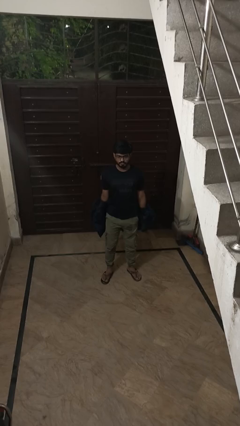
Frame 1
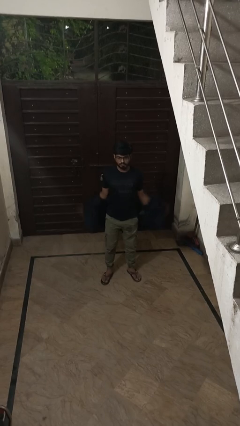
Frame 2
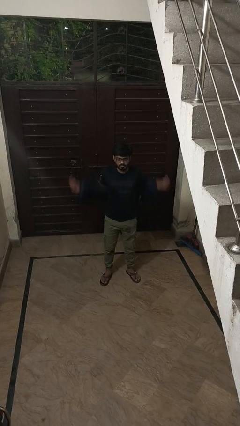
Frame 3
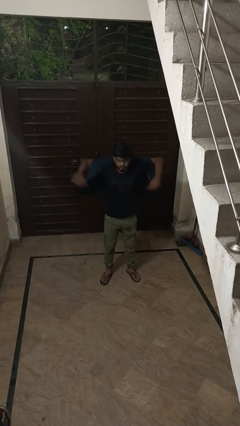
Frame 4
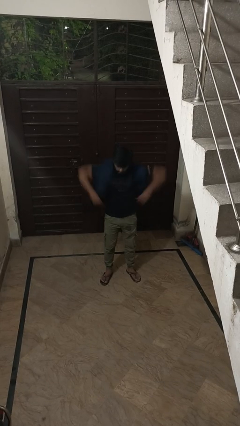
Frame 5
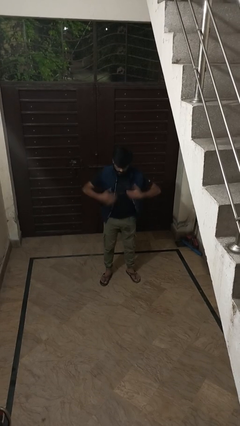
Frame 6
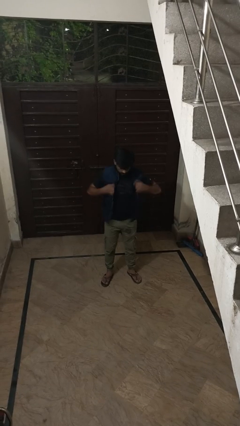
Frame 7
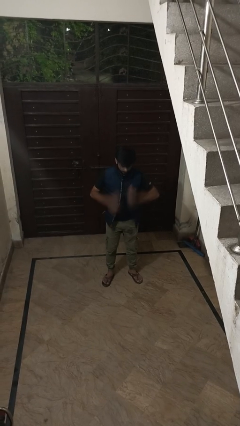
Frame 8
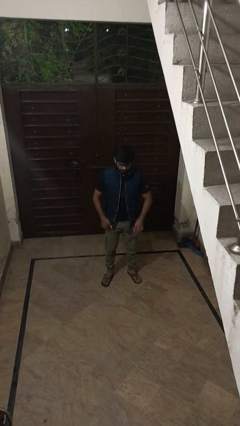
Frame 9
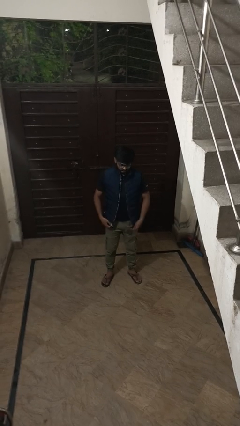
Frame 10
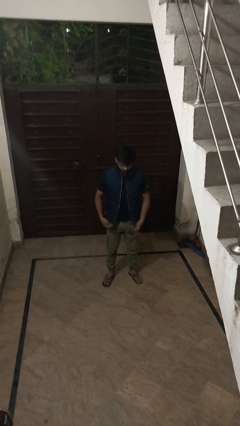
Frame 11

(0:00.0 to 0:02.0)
person puts on jacket

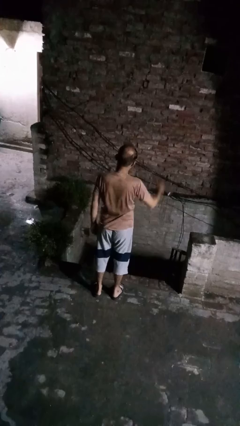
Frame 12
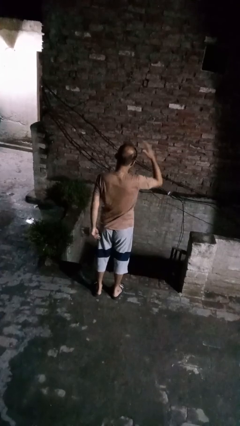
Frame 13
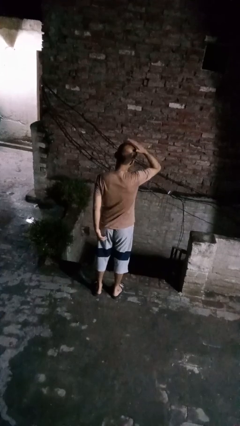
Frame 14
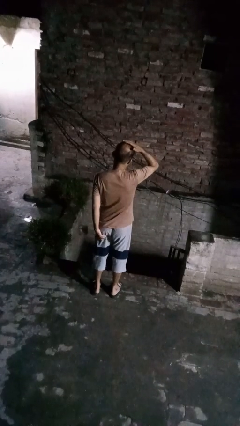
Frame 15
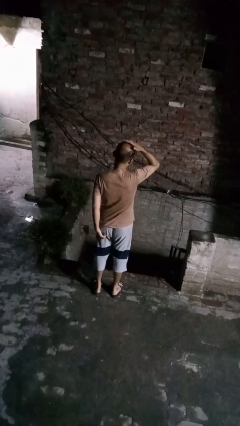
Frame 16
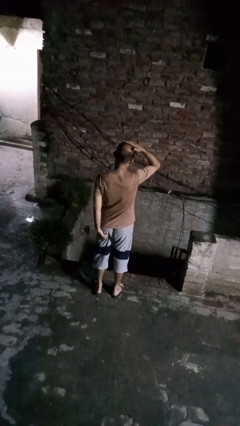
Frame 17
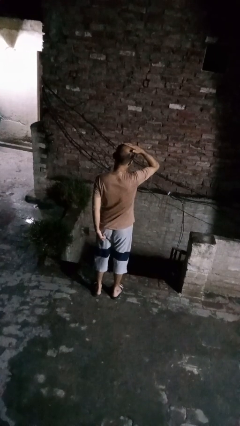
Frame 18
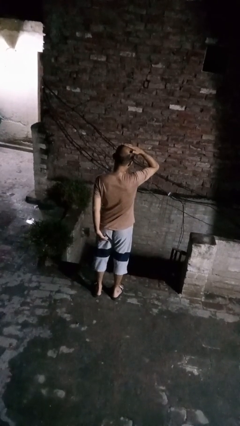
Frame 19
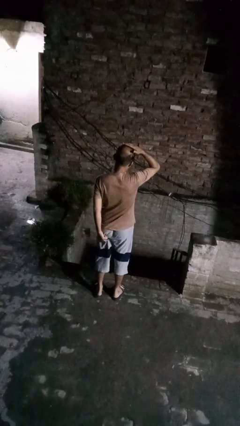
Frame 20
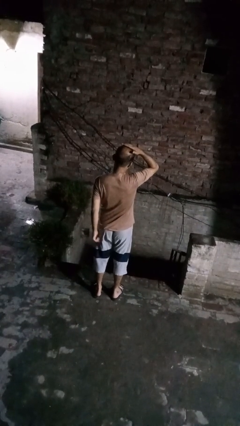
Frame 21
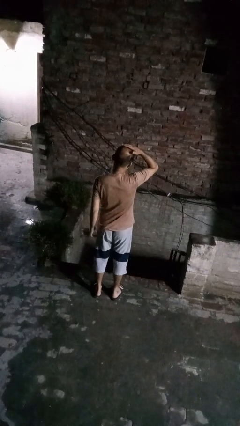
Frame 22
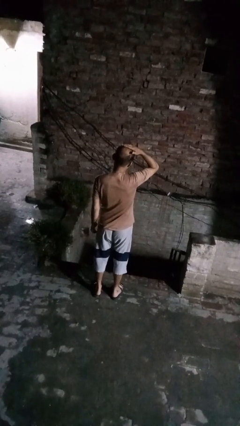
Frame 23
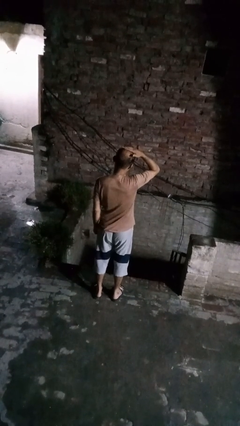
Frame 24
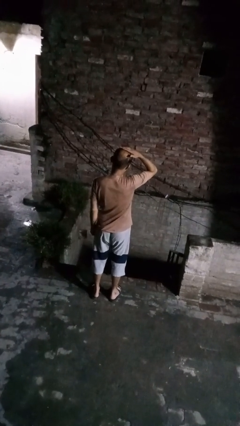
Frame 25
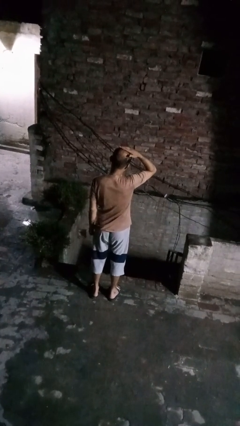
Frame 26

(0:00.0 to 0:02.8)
person pats head

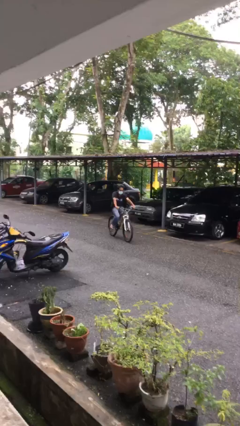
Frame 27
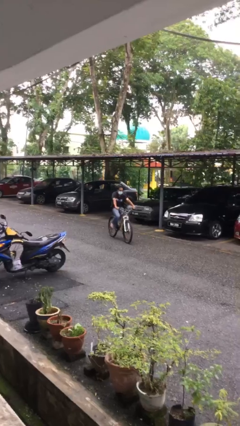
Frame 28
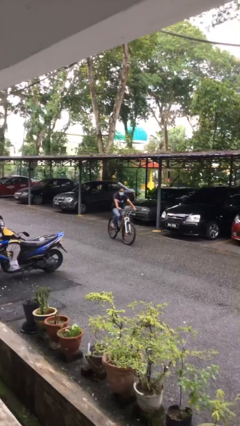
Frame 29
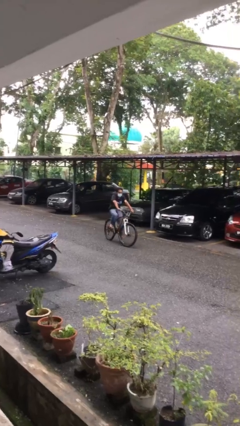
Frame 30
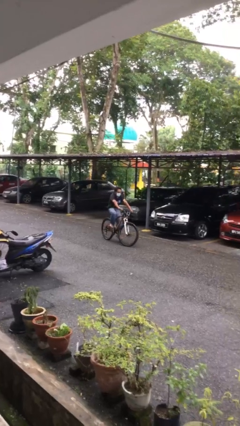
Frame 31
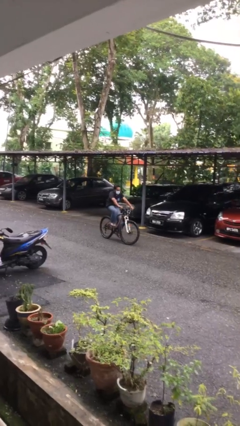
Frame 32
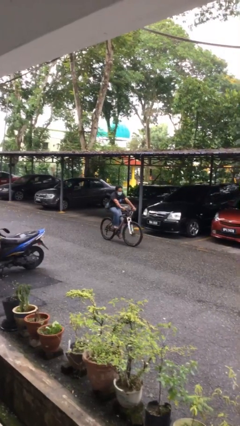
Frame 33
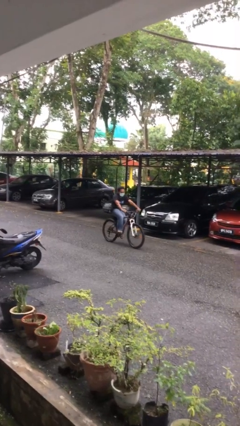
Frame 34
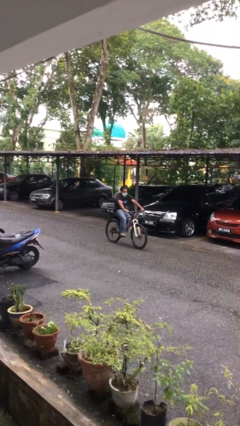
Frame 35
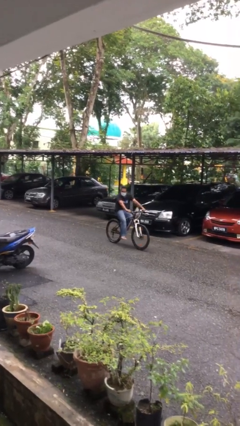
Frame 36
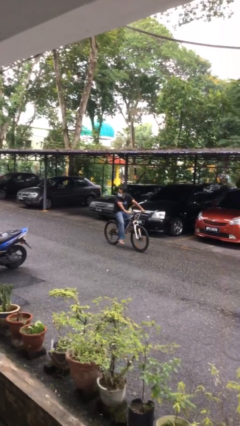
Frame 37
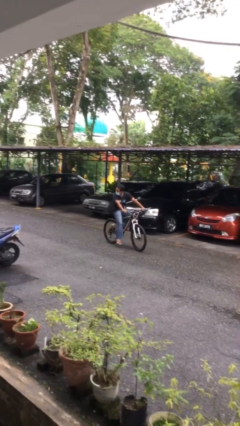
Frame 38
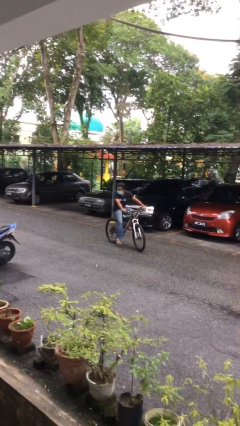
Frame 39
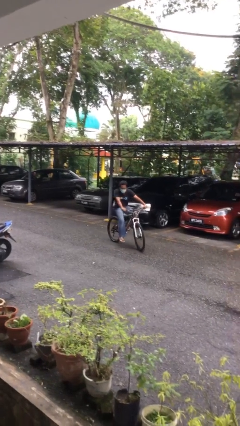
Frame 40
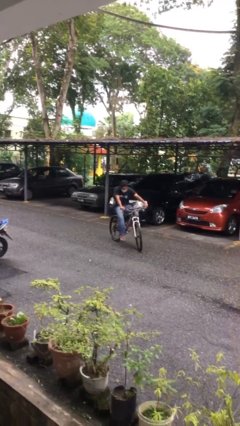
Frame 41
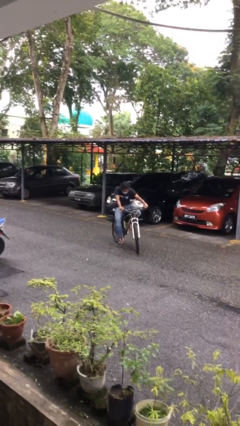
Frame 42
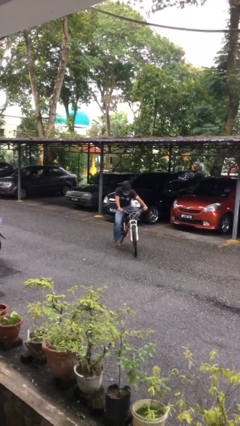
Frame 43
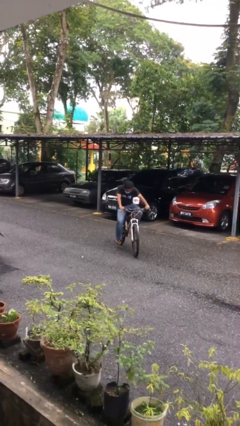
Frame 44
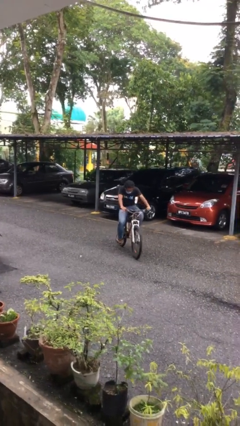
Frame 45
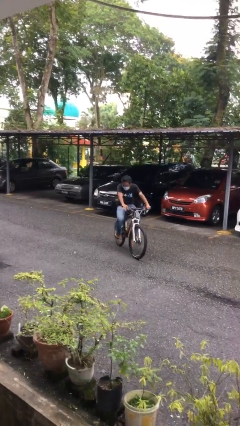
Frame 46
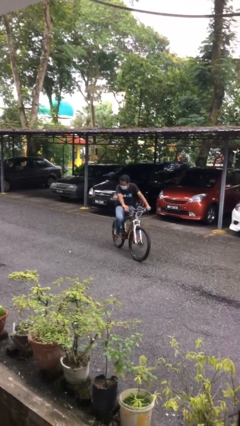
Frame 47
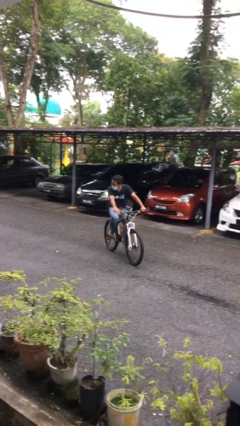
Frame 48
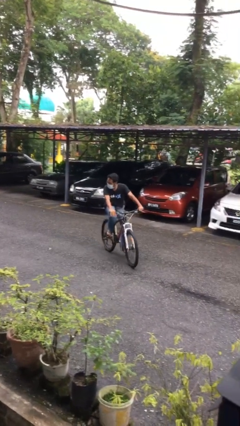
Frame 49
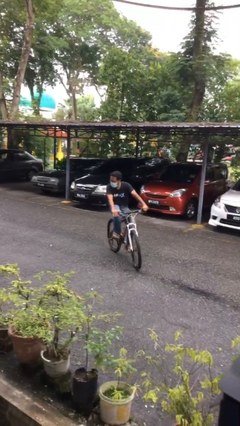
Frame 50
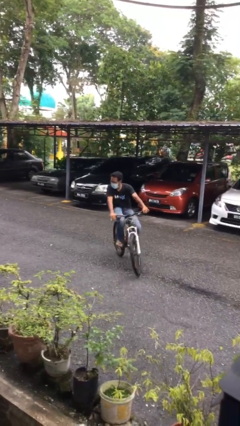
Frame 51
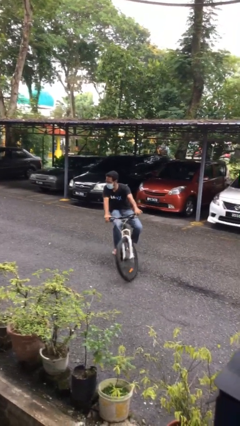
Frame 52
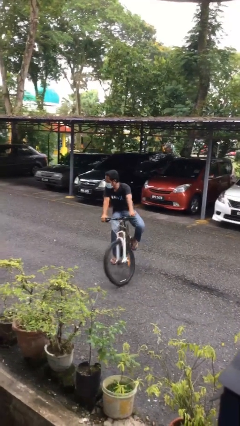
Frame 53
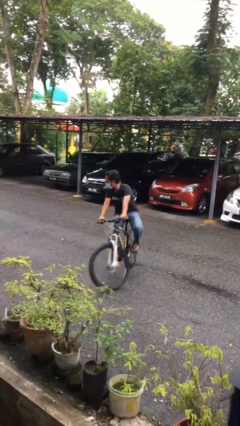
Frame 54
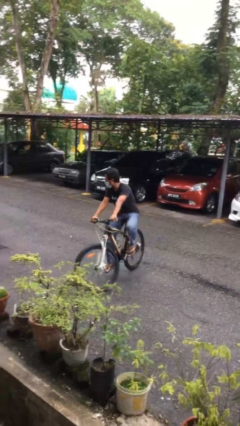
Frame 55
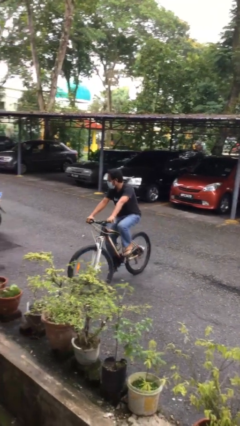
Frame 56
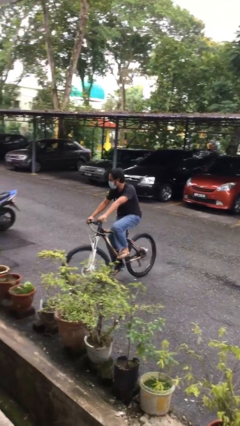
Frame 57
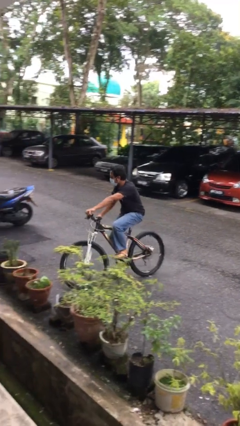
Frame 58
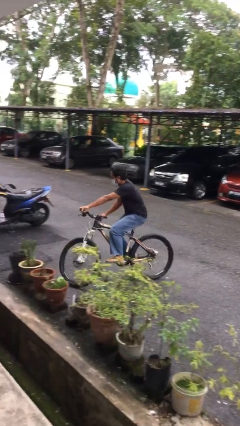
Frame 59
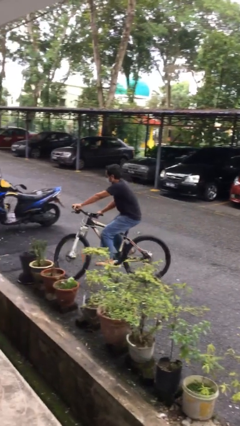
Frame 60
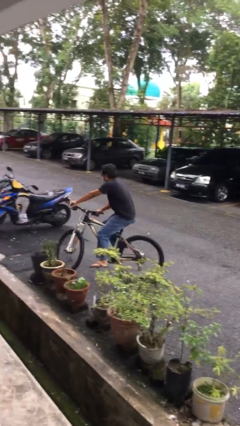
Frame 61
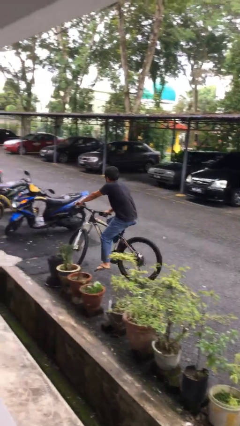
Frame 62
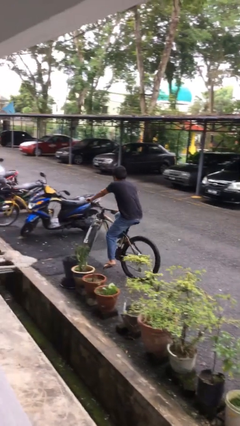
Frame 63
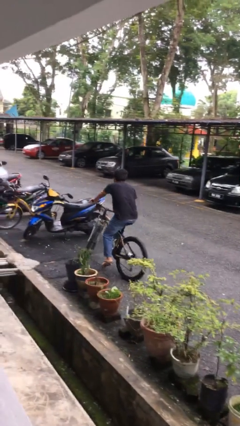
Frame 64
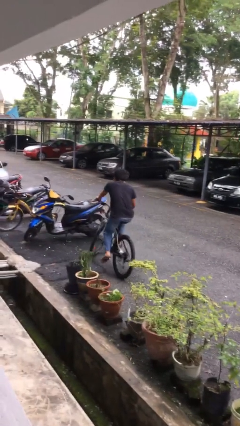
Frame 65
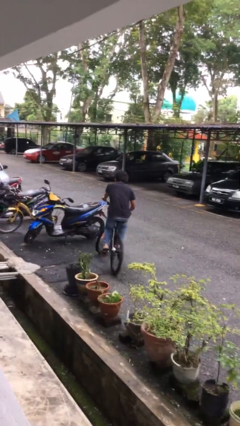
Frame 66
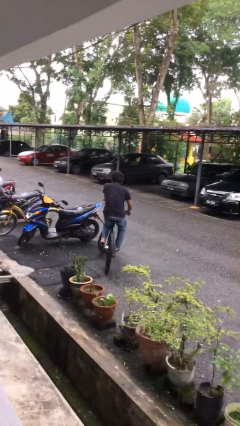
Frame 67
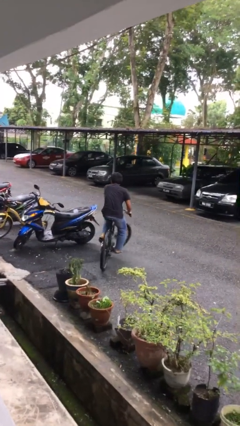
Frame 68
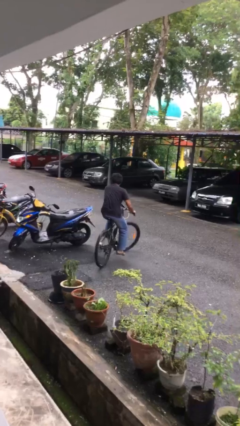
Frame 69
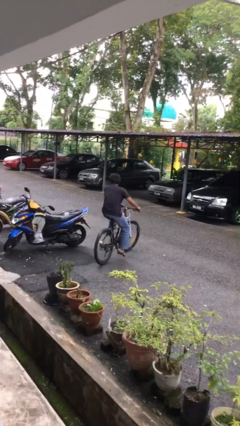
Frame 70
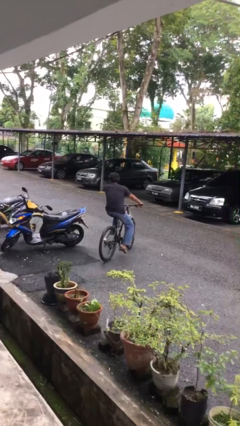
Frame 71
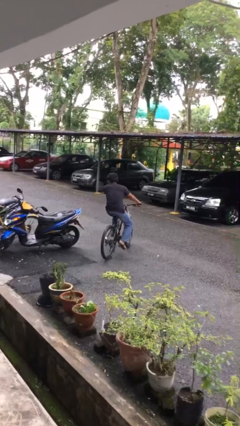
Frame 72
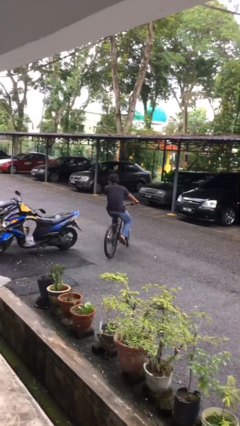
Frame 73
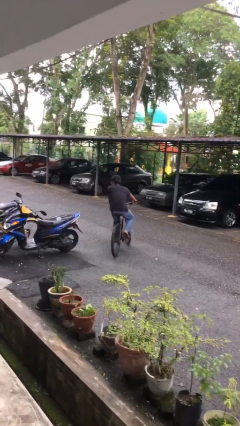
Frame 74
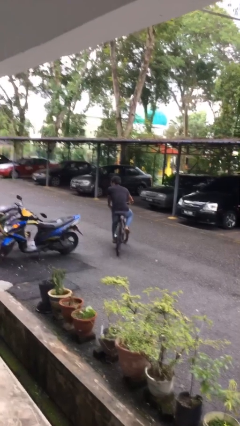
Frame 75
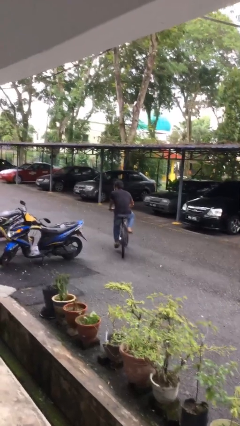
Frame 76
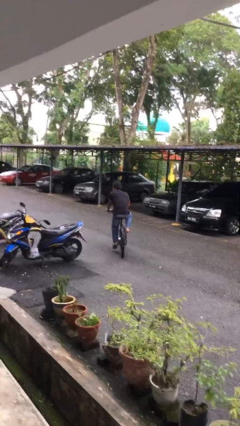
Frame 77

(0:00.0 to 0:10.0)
person rides bicycle

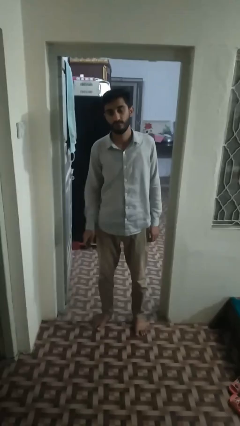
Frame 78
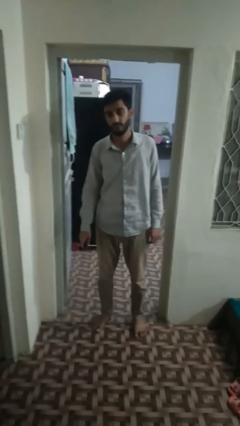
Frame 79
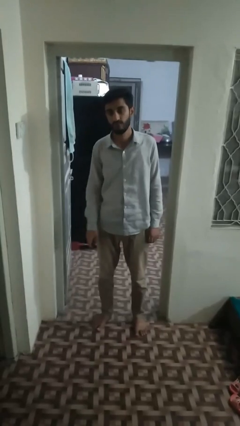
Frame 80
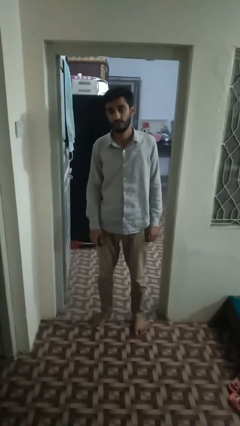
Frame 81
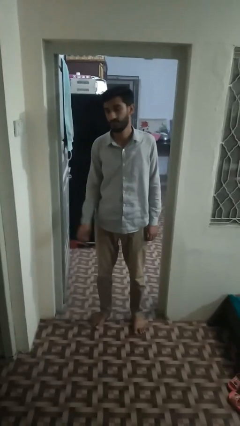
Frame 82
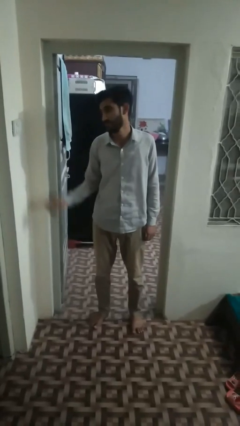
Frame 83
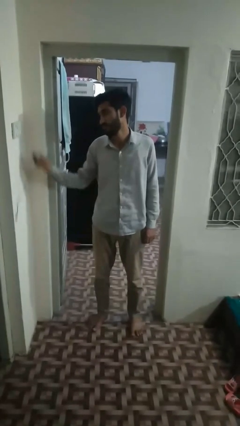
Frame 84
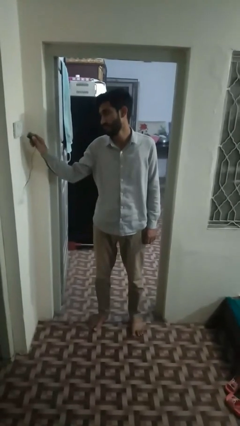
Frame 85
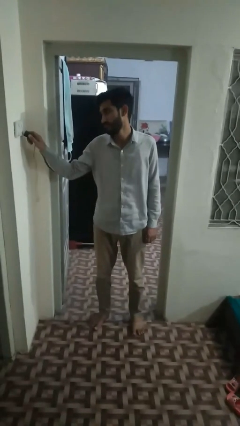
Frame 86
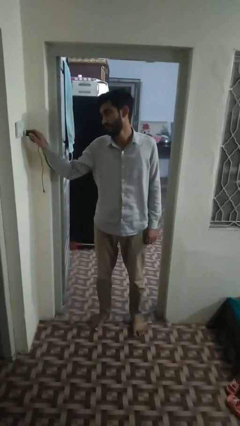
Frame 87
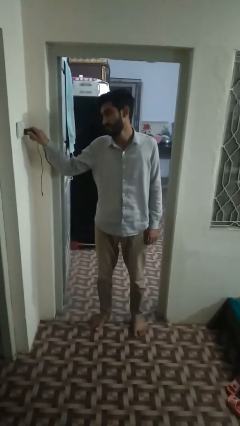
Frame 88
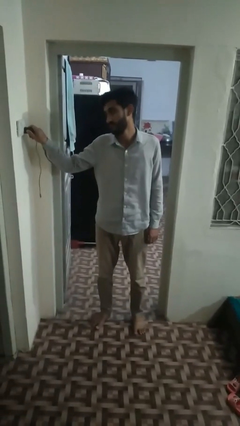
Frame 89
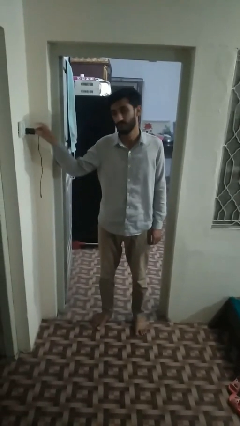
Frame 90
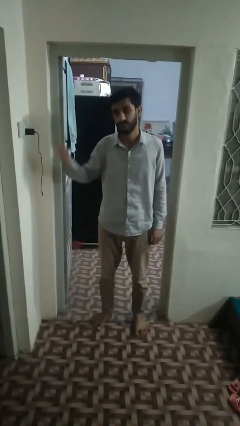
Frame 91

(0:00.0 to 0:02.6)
person plugs into electrical socket

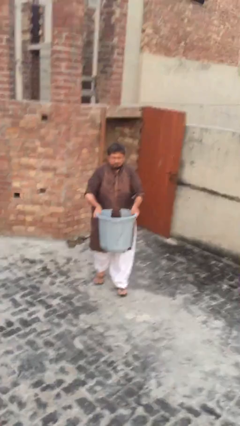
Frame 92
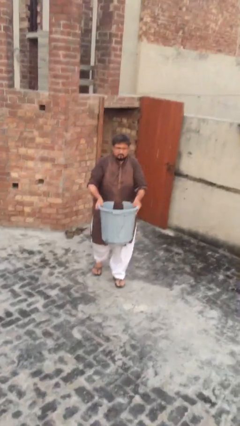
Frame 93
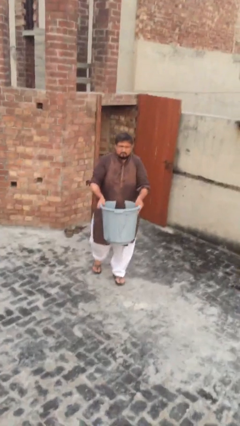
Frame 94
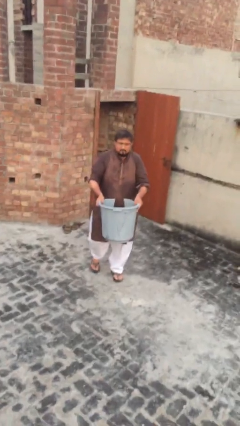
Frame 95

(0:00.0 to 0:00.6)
person puts down object on floor
